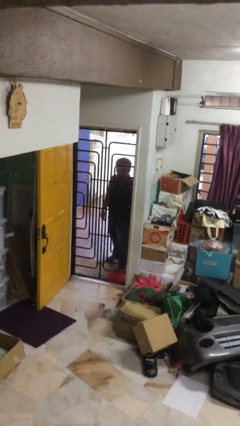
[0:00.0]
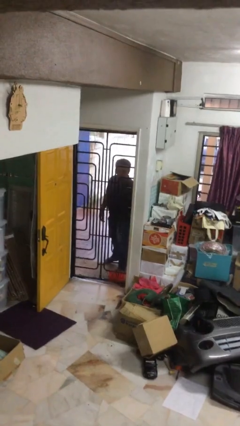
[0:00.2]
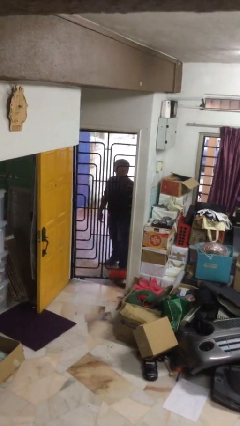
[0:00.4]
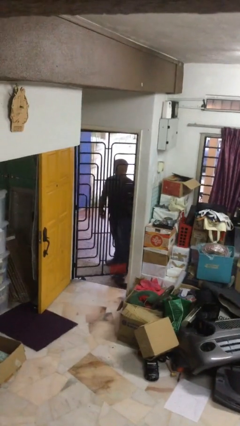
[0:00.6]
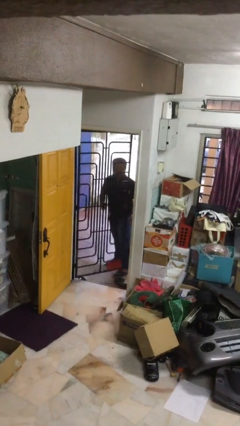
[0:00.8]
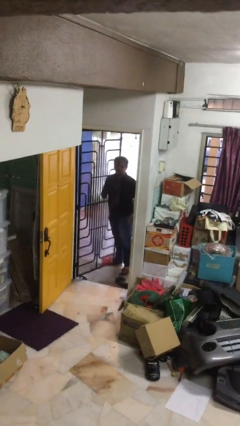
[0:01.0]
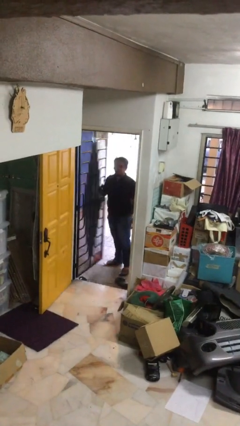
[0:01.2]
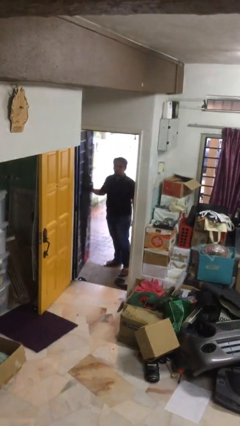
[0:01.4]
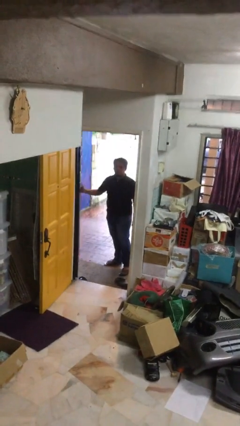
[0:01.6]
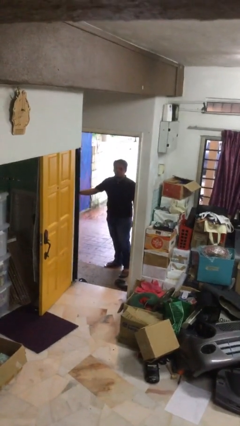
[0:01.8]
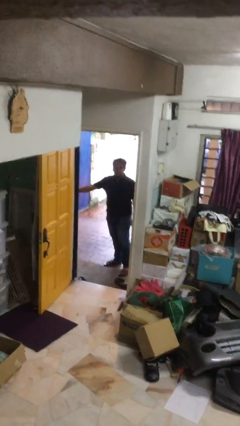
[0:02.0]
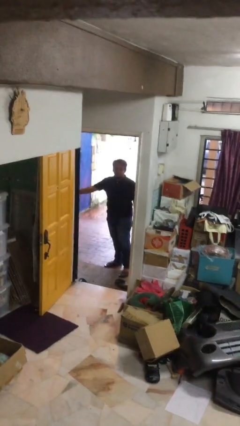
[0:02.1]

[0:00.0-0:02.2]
person opens facility door

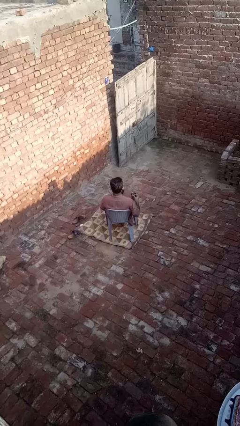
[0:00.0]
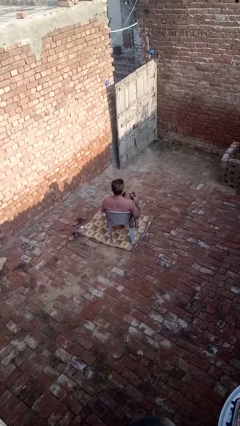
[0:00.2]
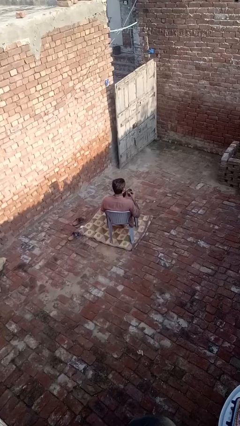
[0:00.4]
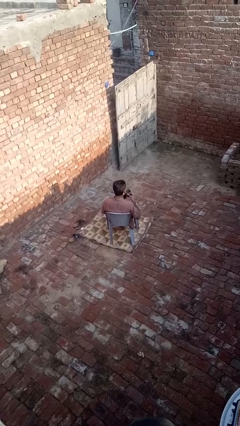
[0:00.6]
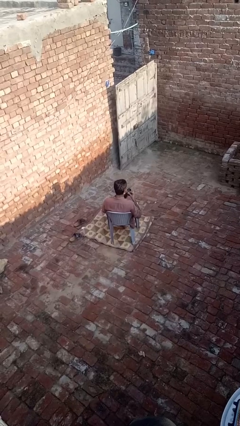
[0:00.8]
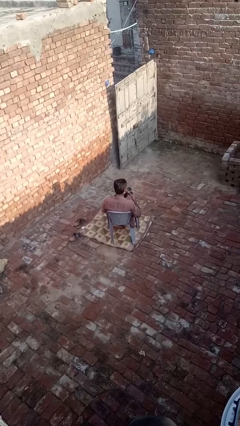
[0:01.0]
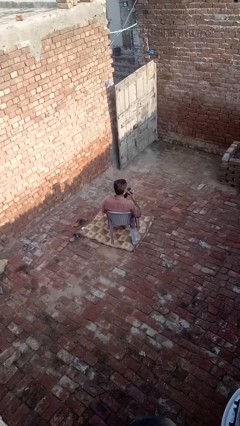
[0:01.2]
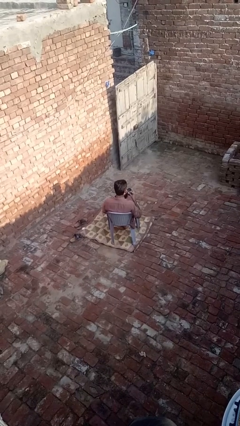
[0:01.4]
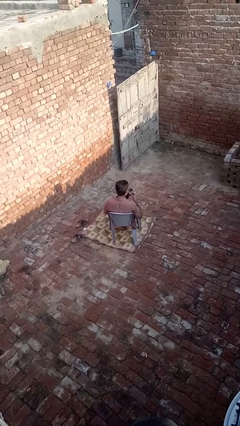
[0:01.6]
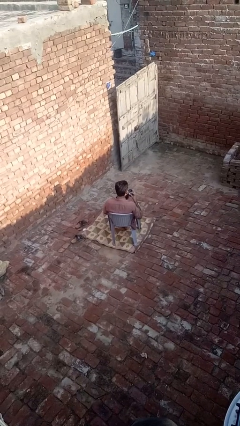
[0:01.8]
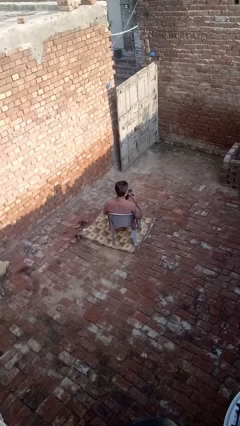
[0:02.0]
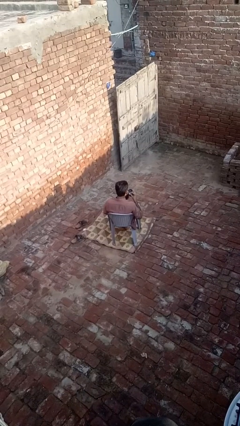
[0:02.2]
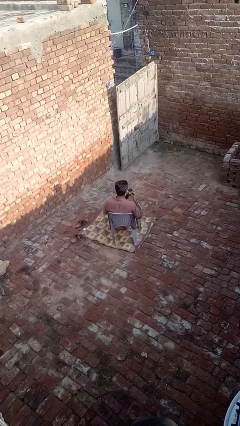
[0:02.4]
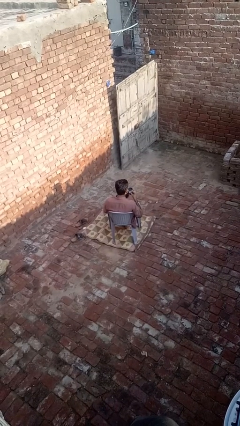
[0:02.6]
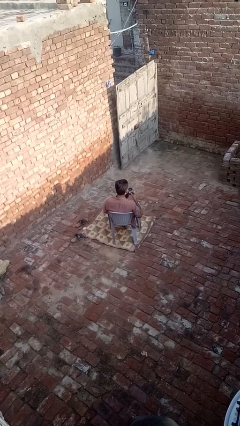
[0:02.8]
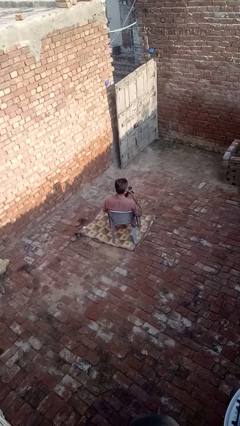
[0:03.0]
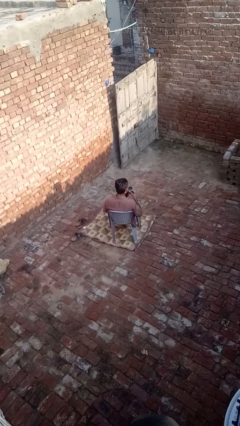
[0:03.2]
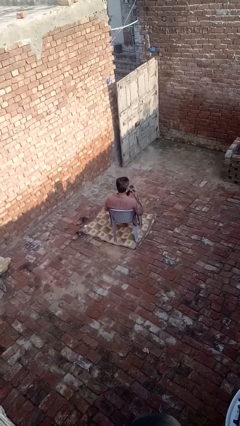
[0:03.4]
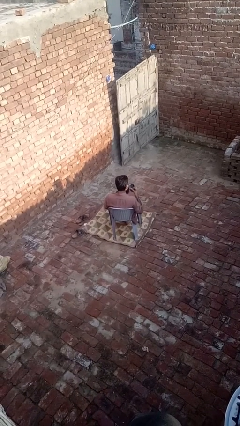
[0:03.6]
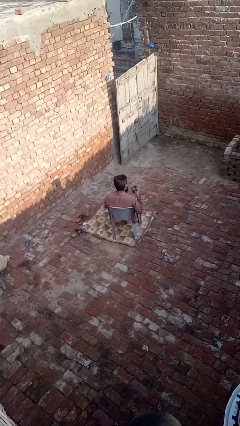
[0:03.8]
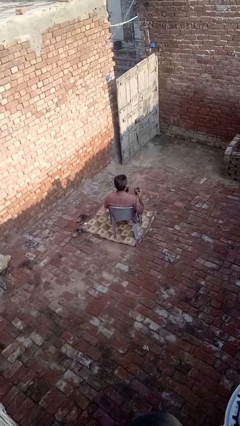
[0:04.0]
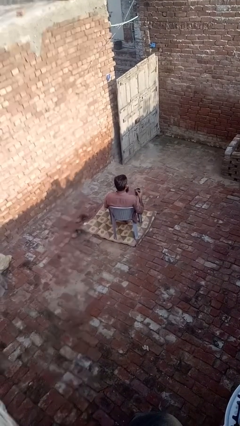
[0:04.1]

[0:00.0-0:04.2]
person drinks from straw

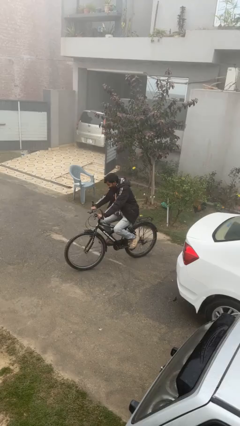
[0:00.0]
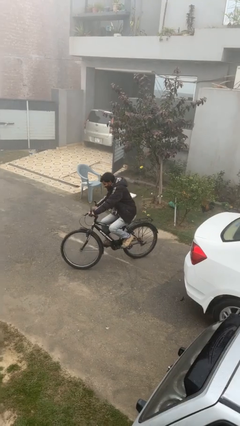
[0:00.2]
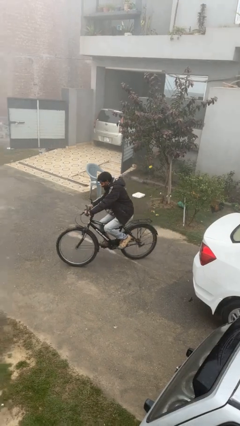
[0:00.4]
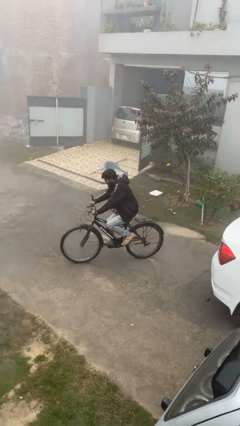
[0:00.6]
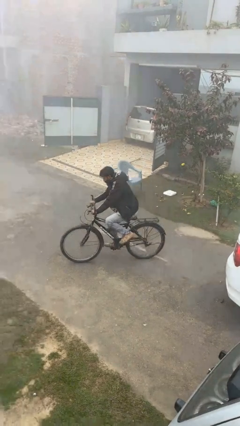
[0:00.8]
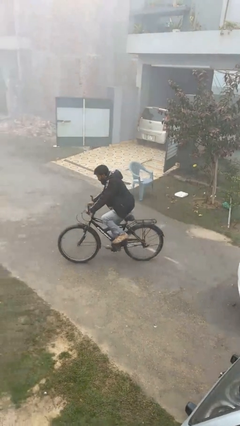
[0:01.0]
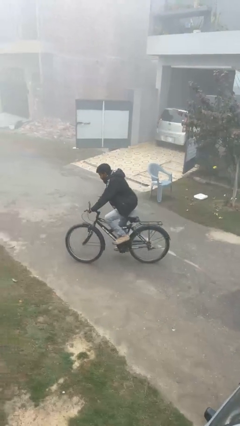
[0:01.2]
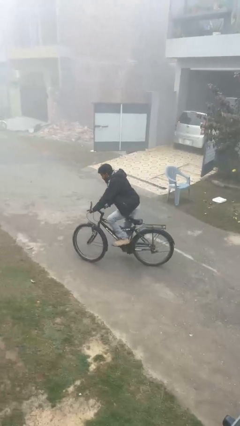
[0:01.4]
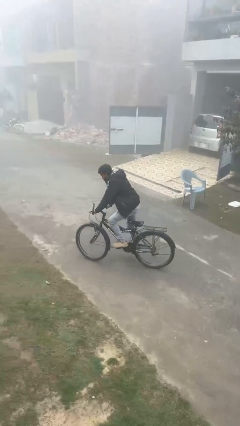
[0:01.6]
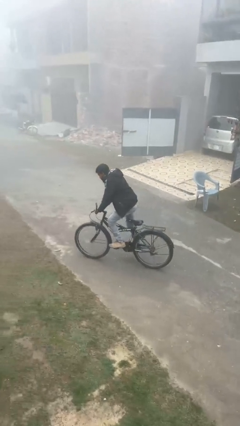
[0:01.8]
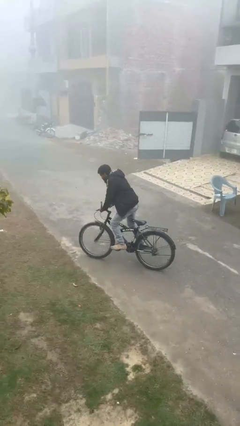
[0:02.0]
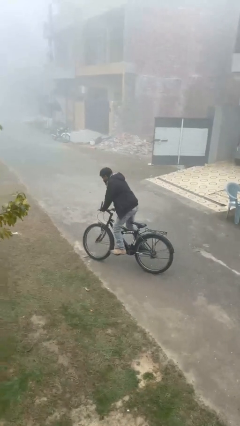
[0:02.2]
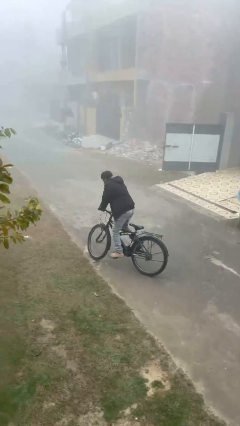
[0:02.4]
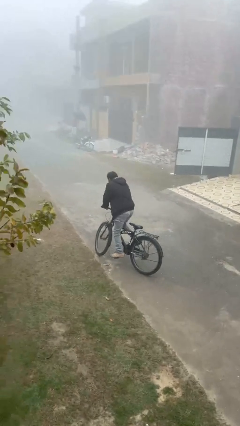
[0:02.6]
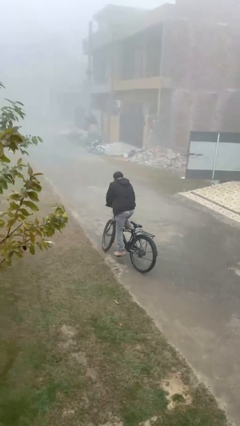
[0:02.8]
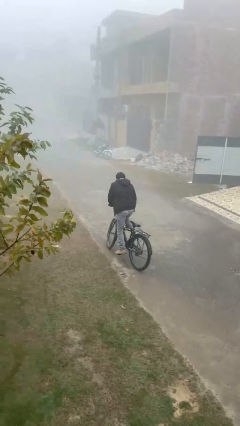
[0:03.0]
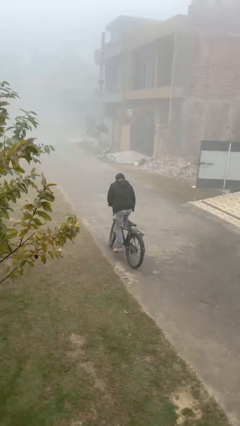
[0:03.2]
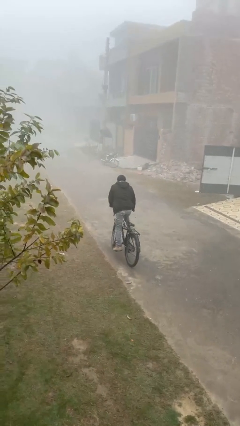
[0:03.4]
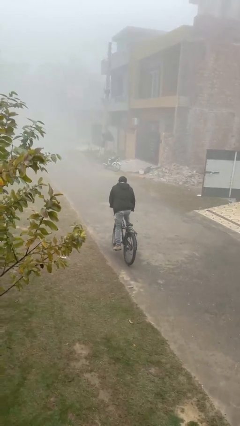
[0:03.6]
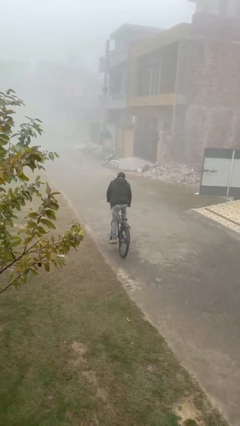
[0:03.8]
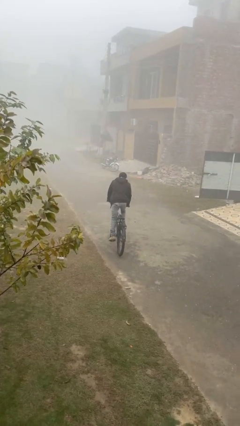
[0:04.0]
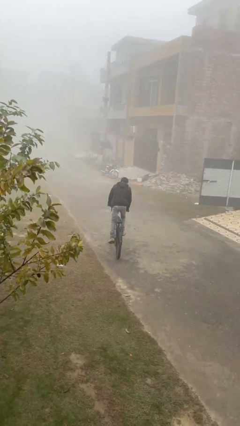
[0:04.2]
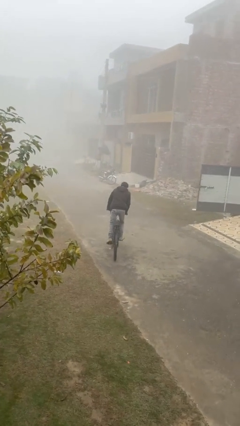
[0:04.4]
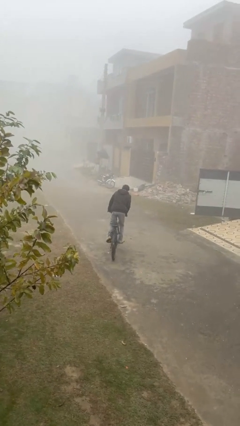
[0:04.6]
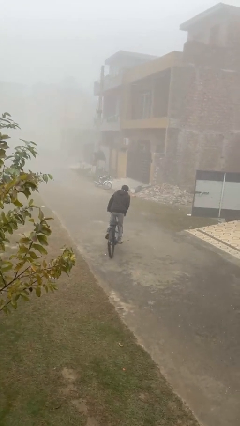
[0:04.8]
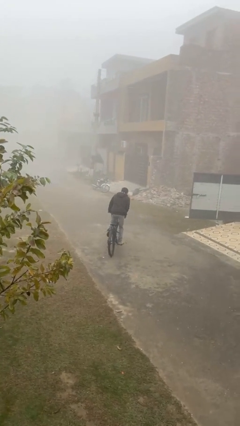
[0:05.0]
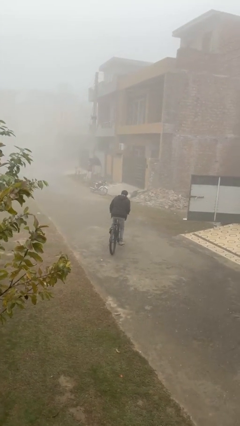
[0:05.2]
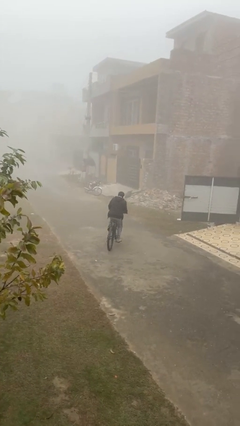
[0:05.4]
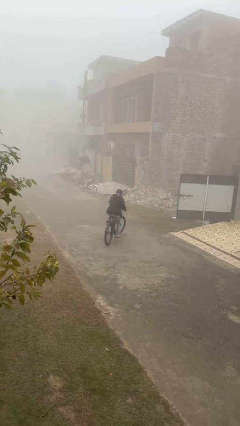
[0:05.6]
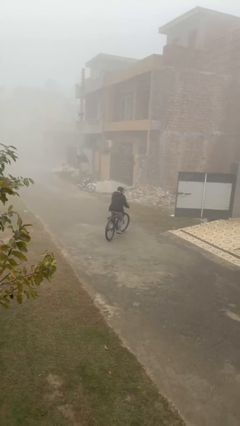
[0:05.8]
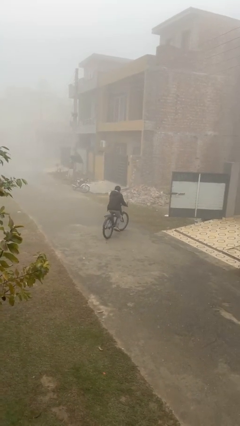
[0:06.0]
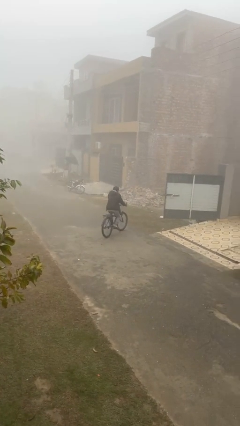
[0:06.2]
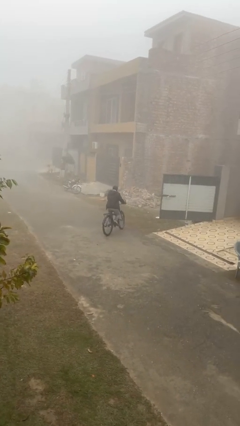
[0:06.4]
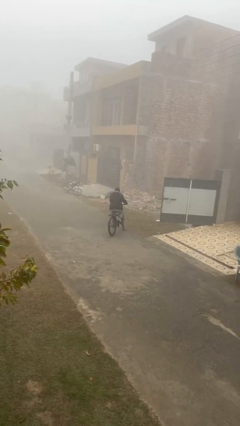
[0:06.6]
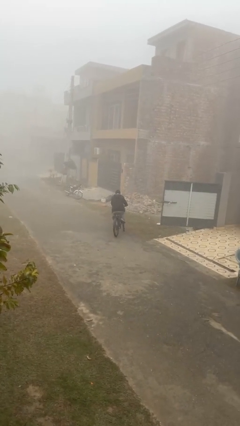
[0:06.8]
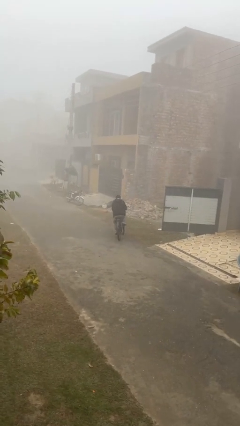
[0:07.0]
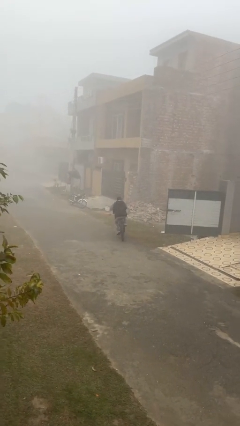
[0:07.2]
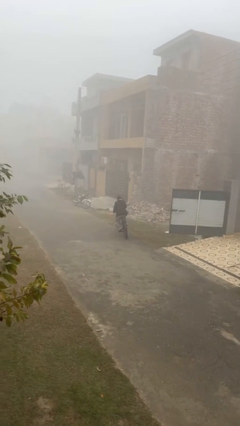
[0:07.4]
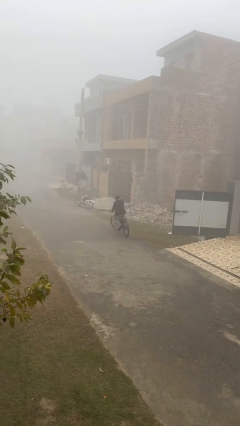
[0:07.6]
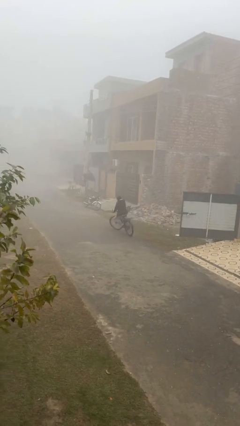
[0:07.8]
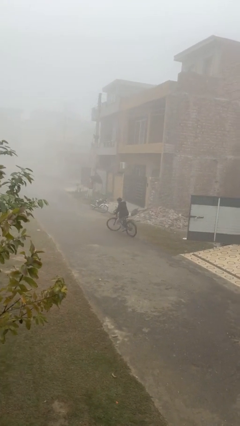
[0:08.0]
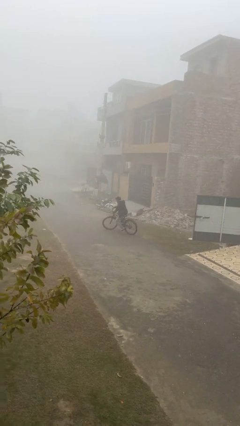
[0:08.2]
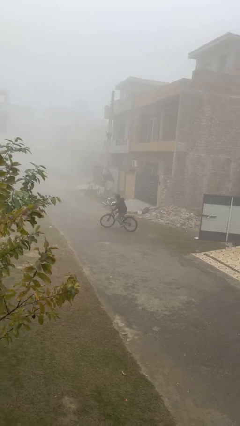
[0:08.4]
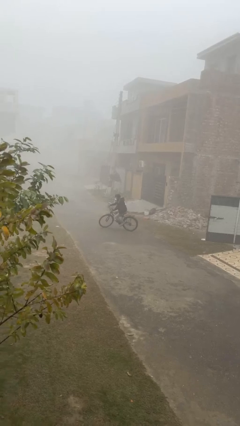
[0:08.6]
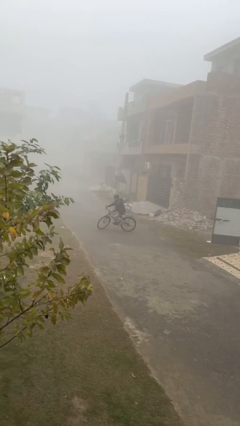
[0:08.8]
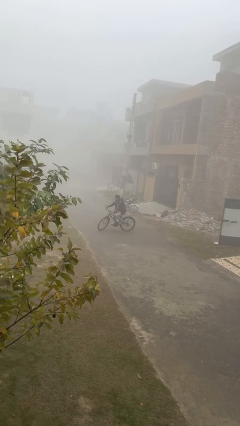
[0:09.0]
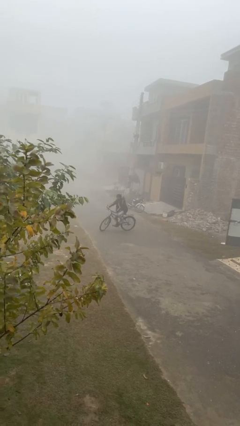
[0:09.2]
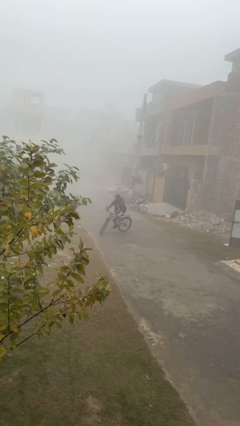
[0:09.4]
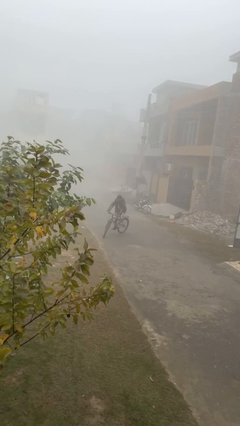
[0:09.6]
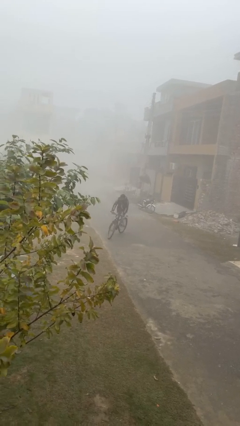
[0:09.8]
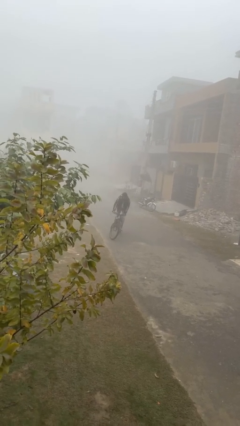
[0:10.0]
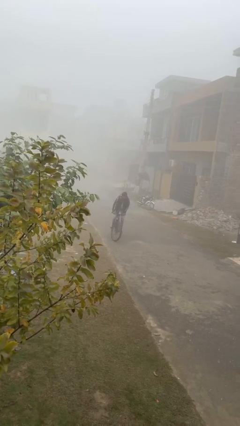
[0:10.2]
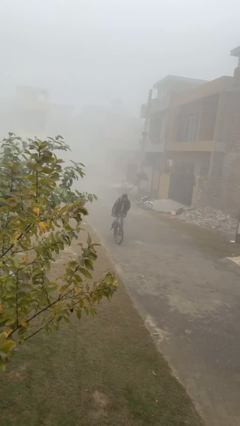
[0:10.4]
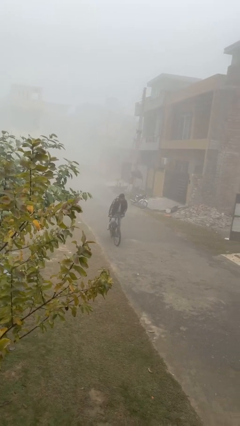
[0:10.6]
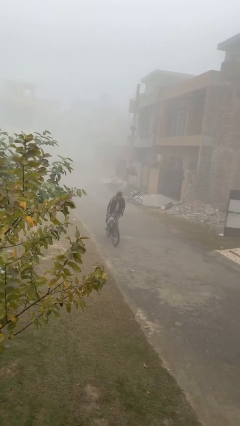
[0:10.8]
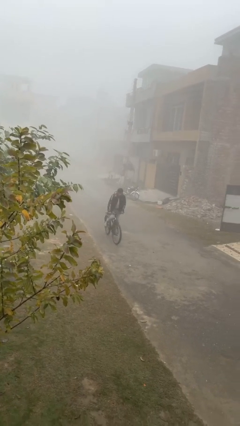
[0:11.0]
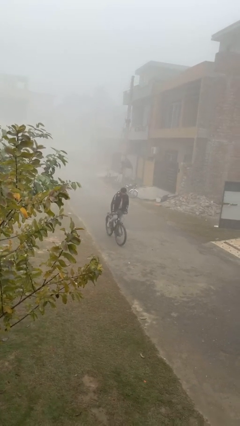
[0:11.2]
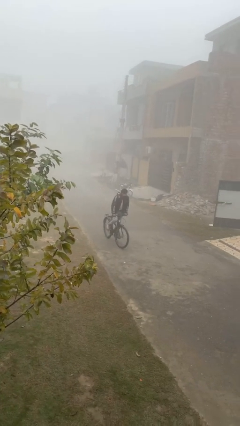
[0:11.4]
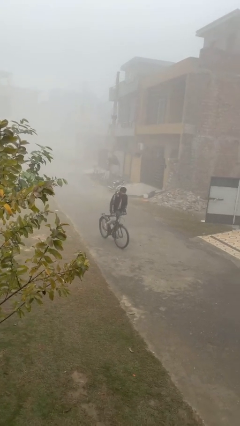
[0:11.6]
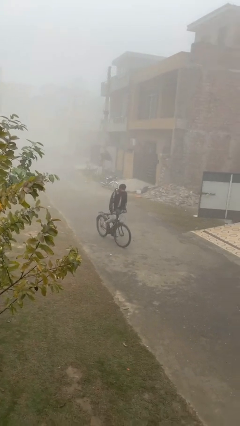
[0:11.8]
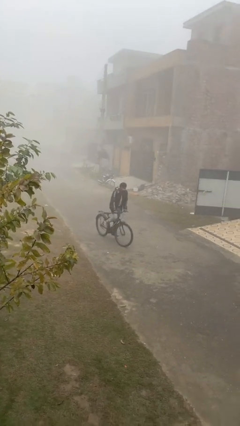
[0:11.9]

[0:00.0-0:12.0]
person rides bicycle
